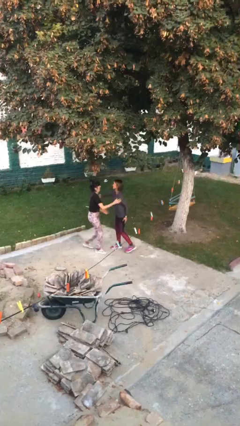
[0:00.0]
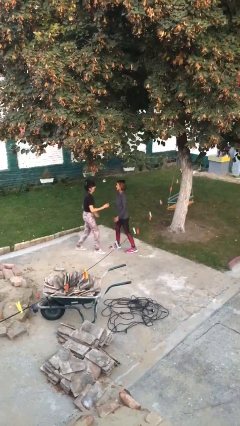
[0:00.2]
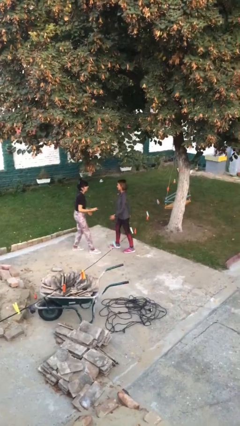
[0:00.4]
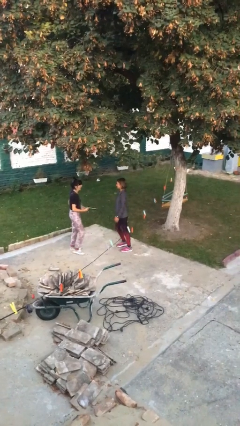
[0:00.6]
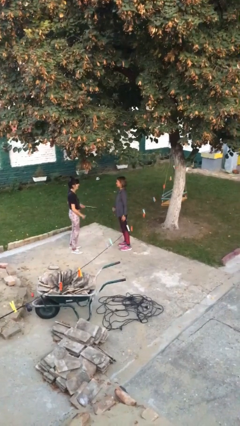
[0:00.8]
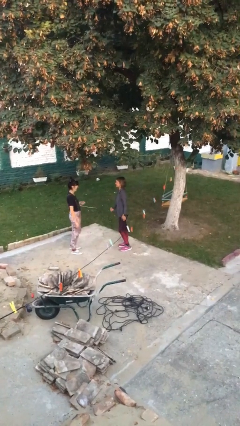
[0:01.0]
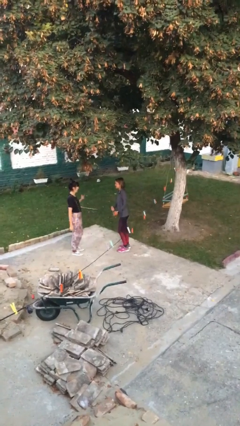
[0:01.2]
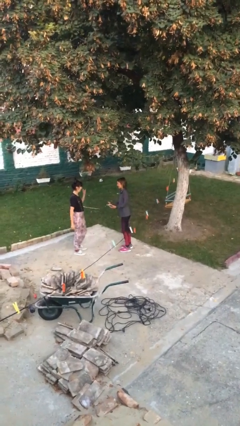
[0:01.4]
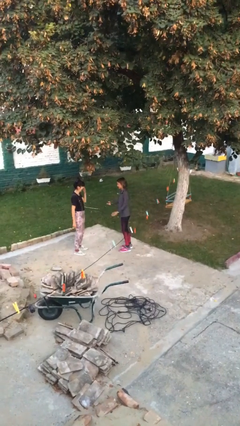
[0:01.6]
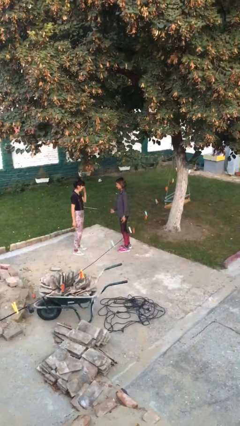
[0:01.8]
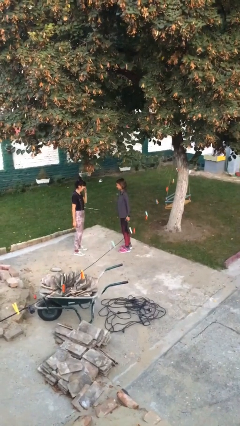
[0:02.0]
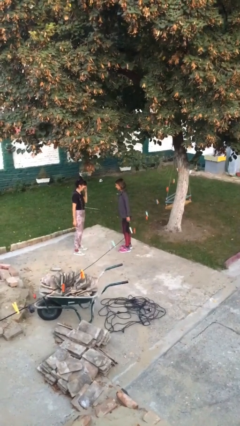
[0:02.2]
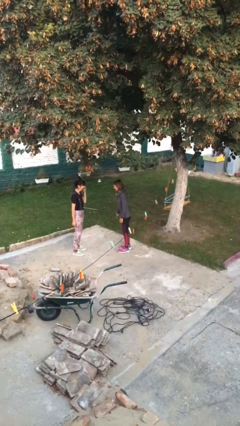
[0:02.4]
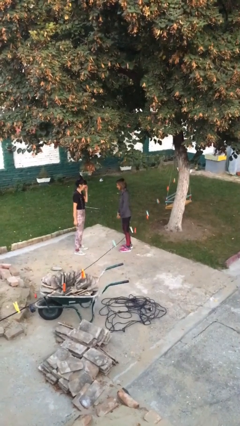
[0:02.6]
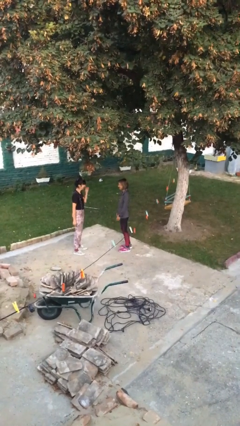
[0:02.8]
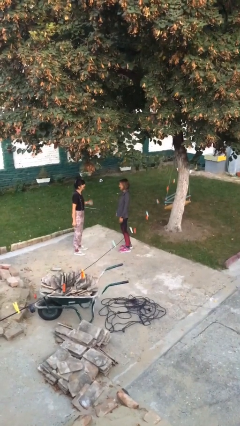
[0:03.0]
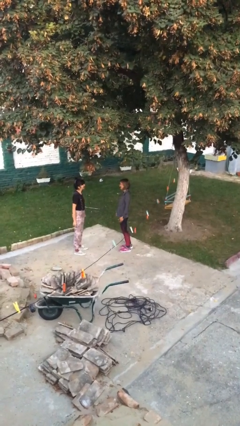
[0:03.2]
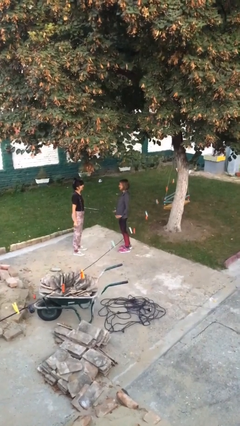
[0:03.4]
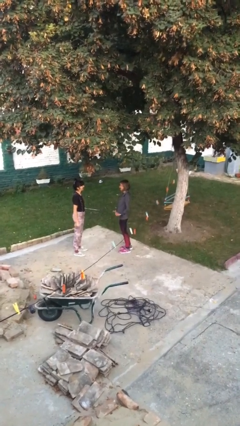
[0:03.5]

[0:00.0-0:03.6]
person talks to person

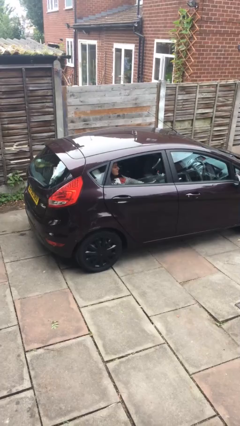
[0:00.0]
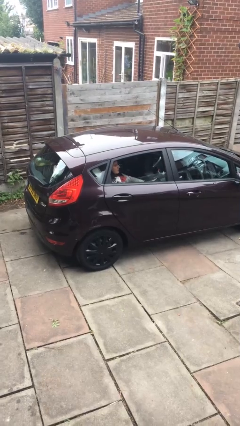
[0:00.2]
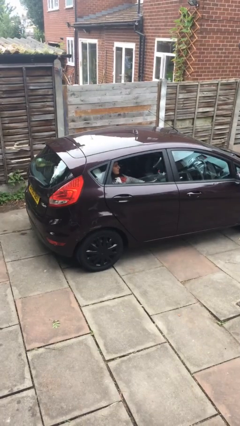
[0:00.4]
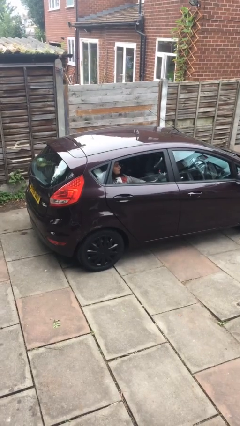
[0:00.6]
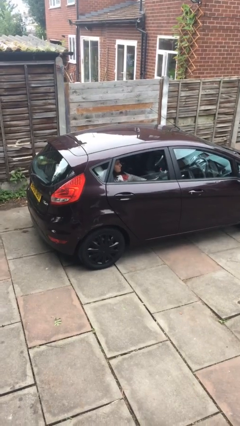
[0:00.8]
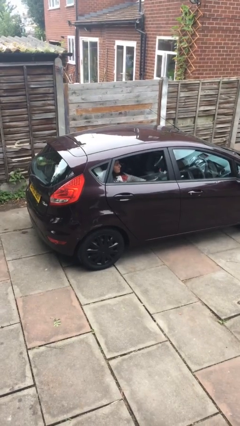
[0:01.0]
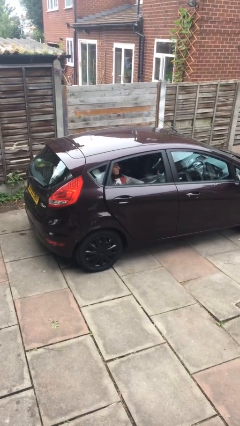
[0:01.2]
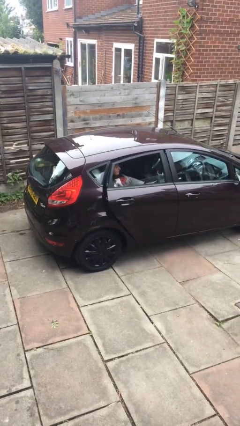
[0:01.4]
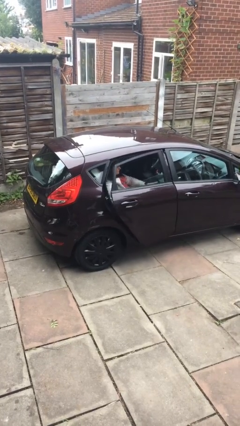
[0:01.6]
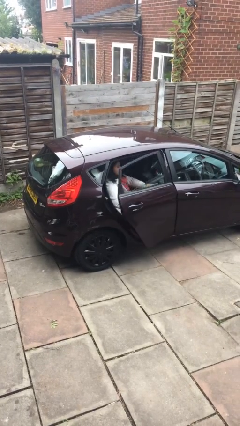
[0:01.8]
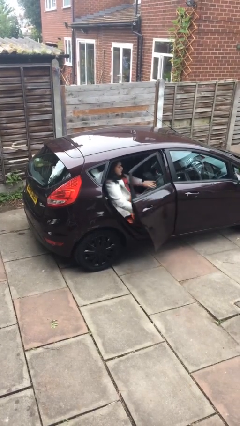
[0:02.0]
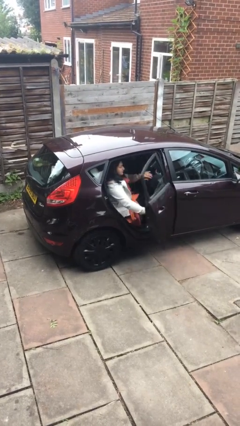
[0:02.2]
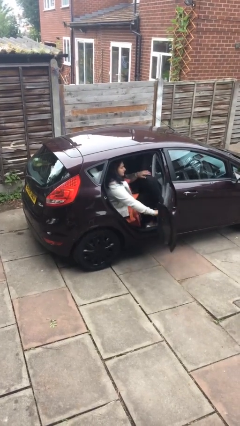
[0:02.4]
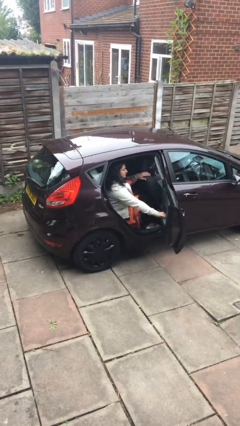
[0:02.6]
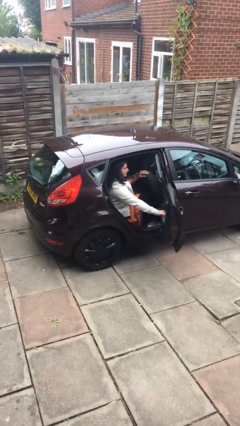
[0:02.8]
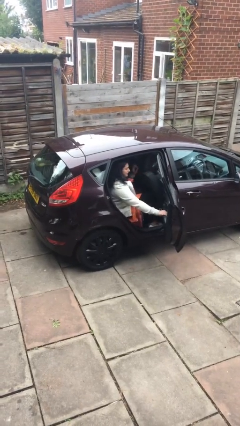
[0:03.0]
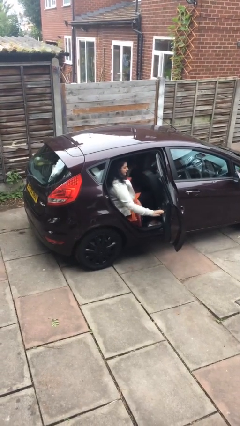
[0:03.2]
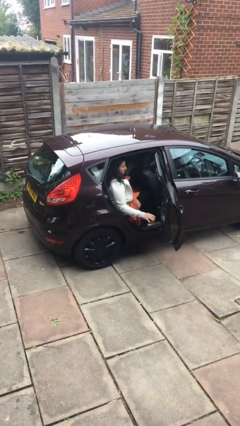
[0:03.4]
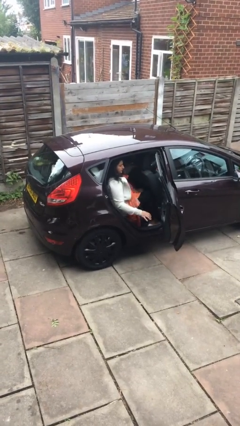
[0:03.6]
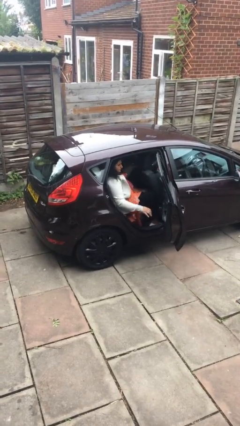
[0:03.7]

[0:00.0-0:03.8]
person opens car door

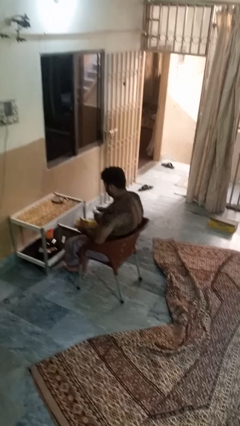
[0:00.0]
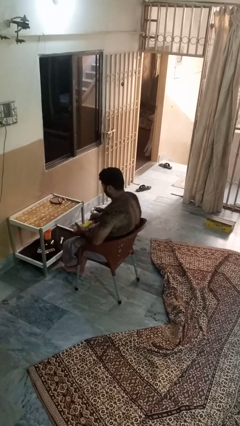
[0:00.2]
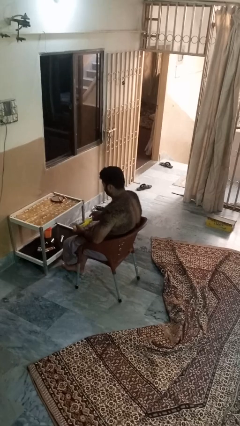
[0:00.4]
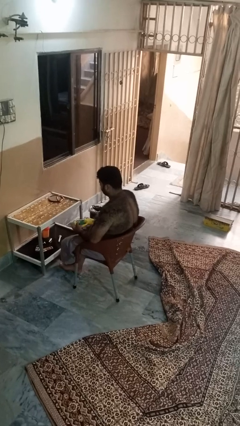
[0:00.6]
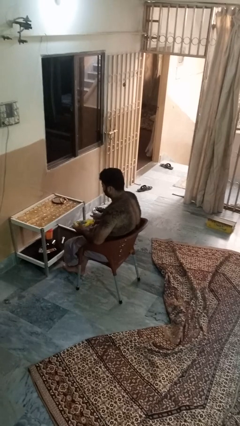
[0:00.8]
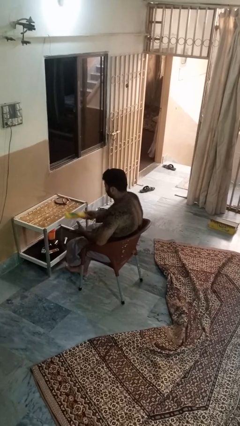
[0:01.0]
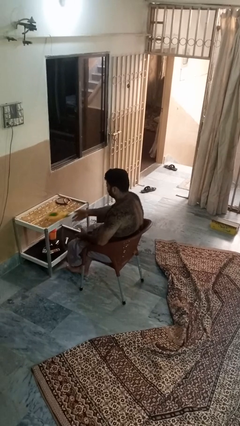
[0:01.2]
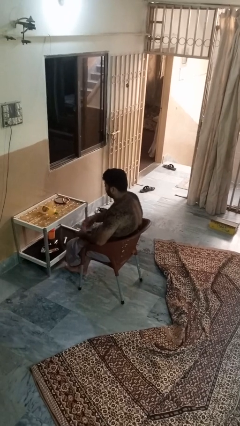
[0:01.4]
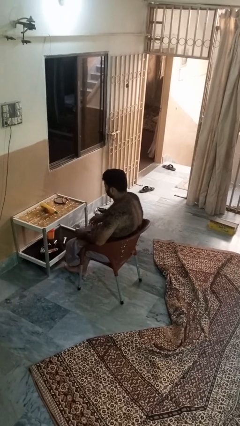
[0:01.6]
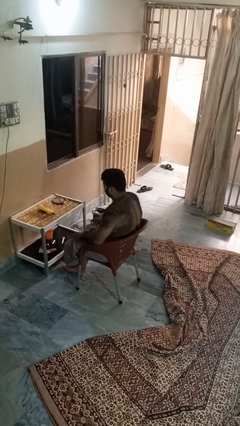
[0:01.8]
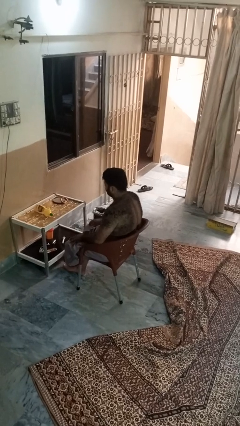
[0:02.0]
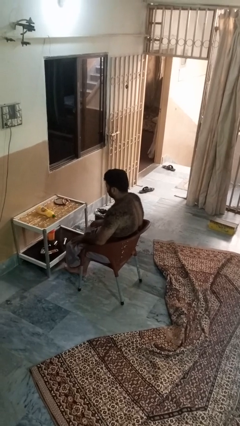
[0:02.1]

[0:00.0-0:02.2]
person throws object on table

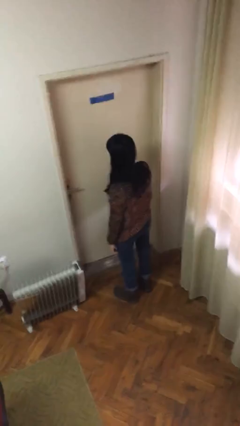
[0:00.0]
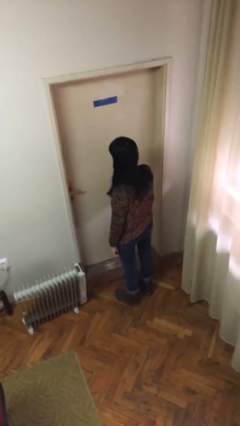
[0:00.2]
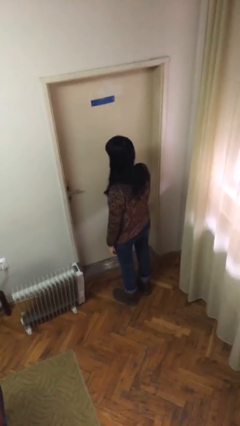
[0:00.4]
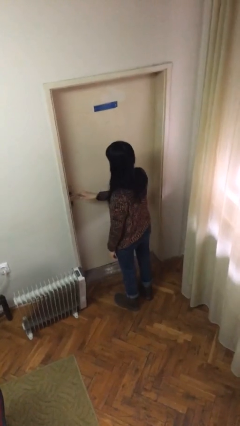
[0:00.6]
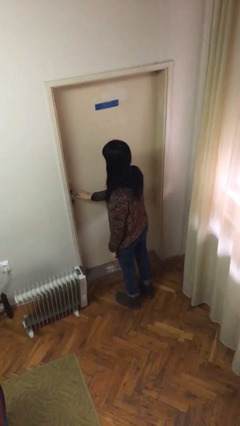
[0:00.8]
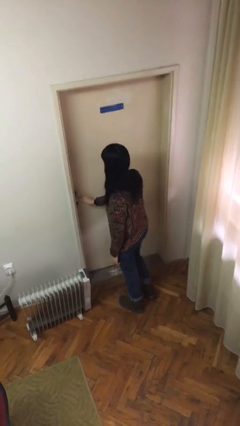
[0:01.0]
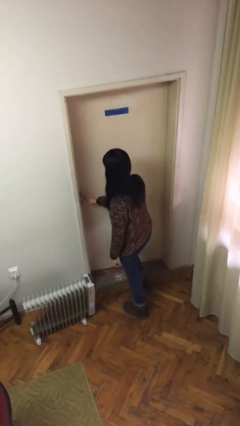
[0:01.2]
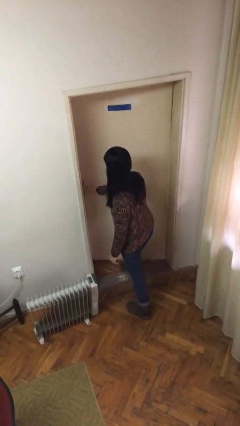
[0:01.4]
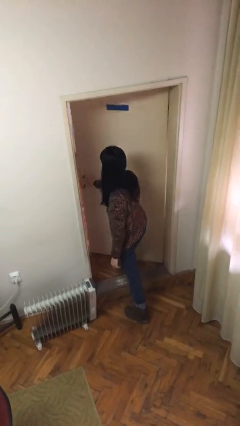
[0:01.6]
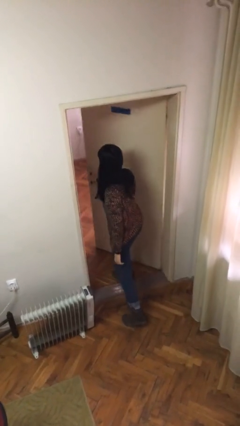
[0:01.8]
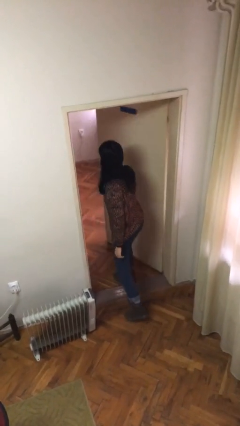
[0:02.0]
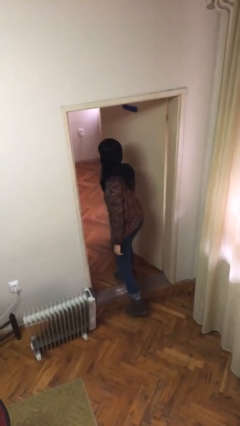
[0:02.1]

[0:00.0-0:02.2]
person opens facility door

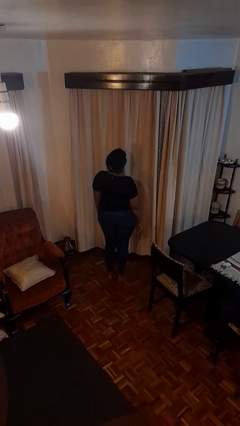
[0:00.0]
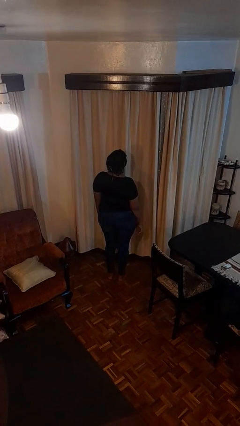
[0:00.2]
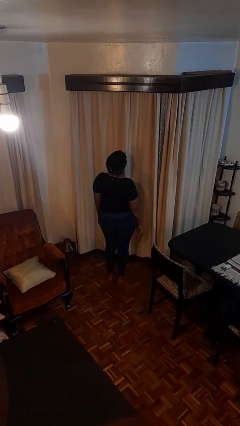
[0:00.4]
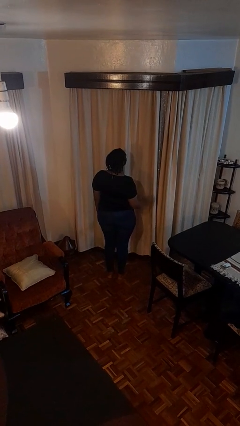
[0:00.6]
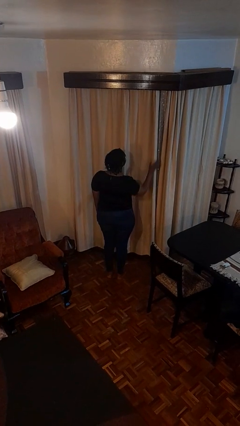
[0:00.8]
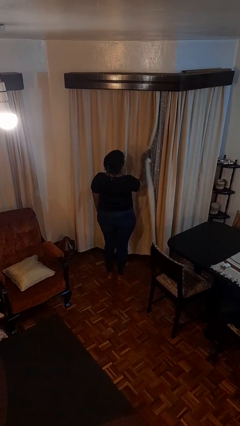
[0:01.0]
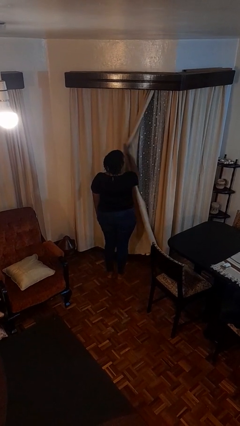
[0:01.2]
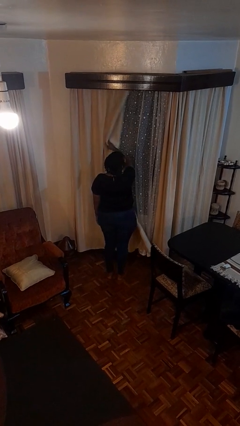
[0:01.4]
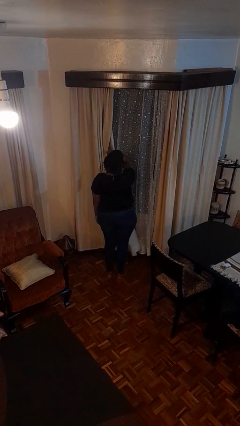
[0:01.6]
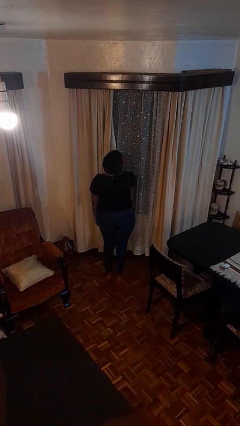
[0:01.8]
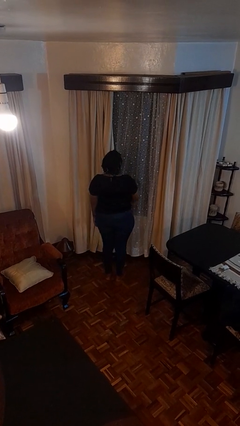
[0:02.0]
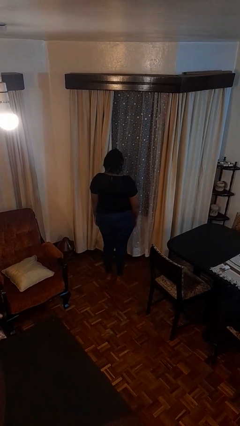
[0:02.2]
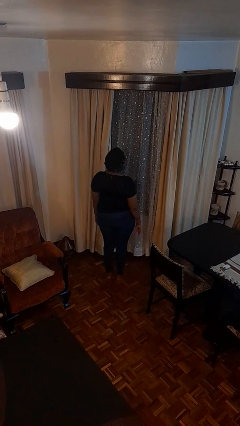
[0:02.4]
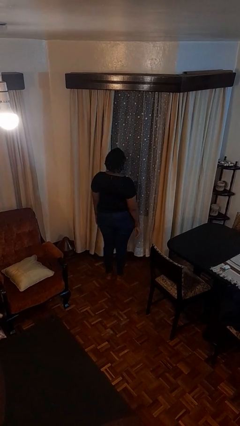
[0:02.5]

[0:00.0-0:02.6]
person opens curtains

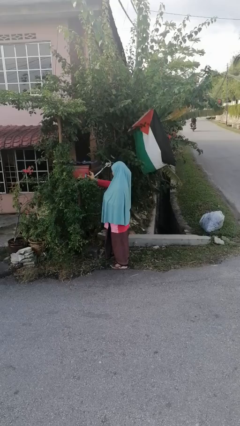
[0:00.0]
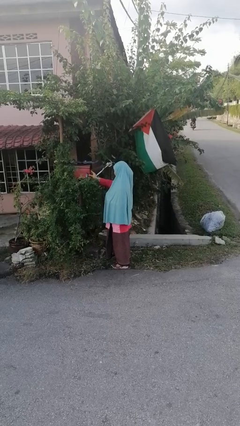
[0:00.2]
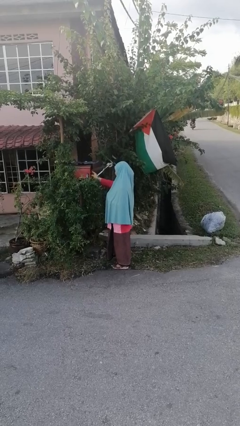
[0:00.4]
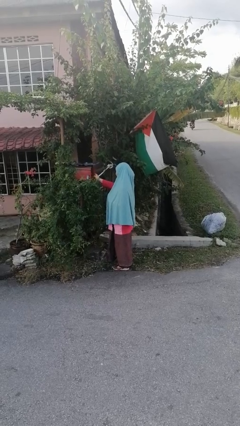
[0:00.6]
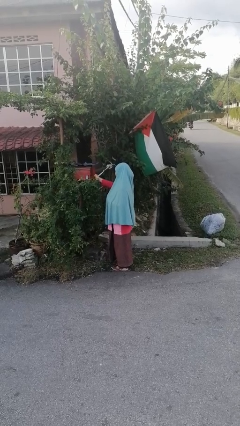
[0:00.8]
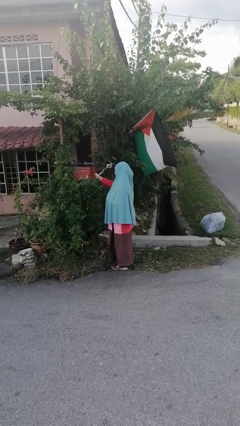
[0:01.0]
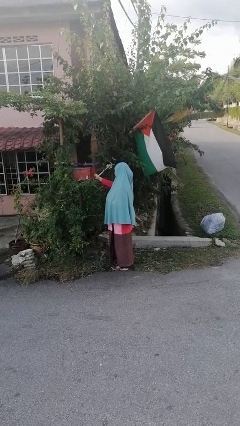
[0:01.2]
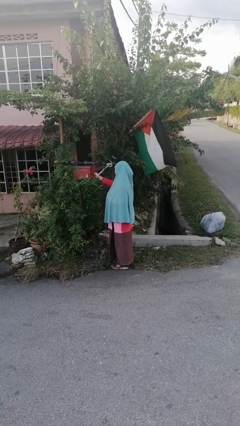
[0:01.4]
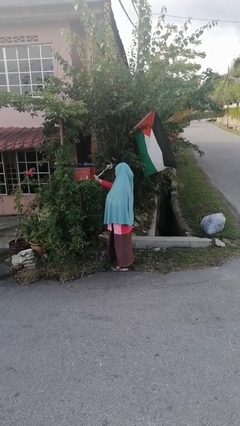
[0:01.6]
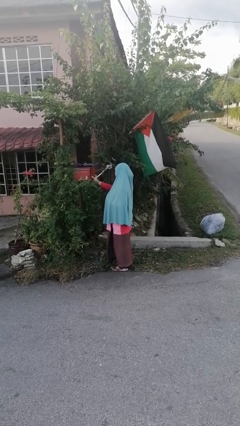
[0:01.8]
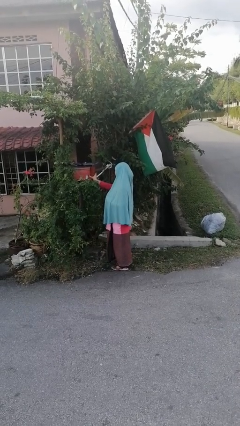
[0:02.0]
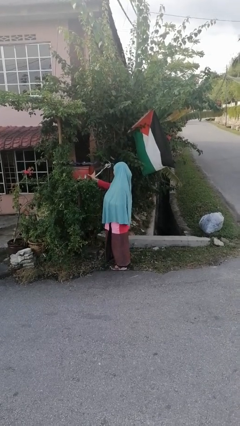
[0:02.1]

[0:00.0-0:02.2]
person opens mailbox

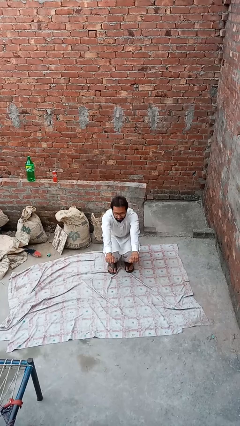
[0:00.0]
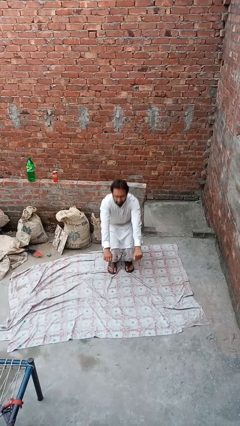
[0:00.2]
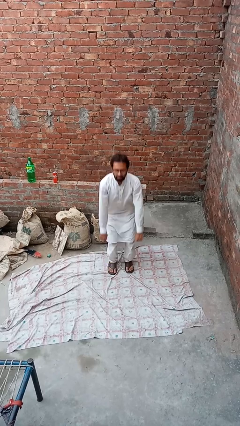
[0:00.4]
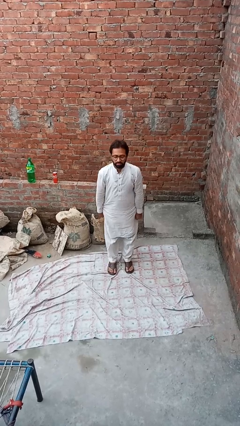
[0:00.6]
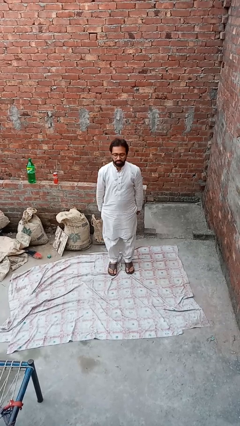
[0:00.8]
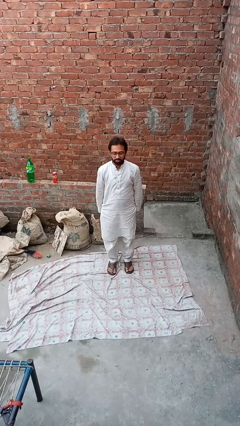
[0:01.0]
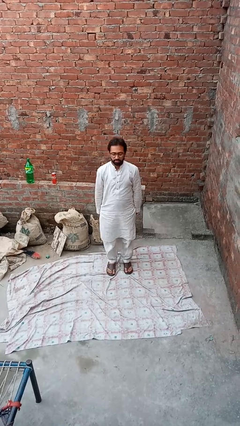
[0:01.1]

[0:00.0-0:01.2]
person stands up
